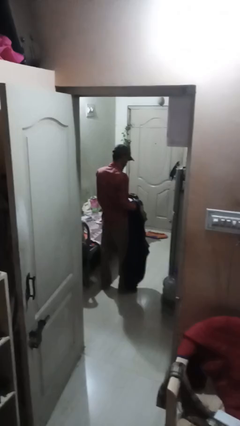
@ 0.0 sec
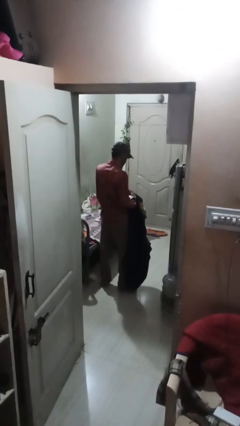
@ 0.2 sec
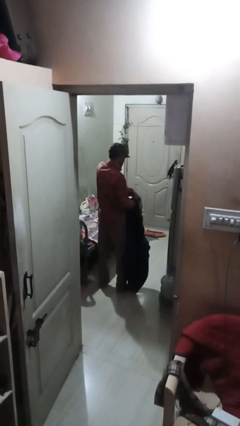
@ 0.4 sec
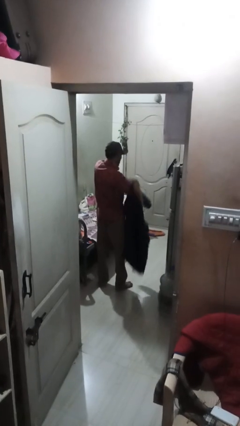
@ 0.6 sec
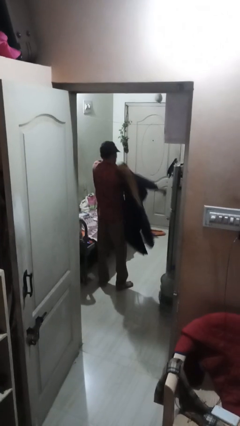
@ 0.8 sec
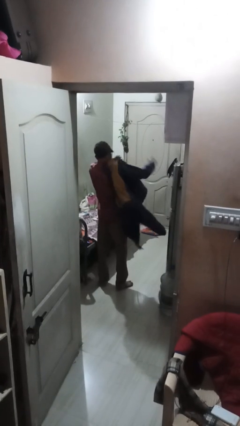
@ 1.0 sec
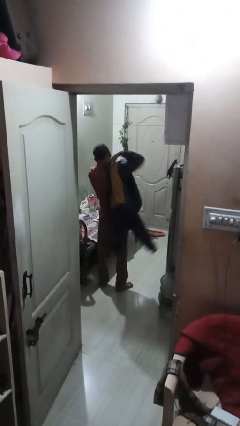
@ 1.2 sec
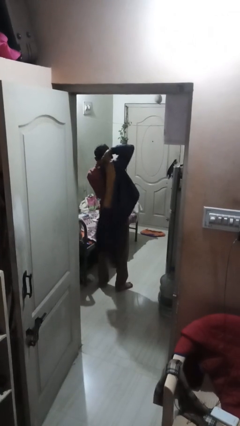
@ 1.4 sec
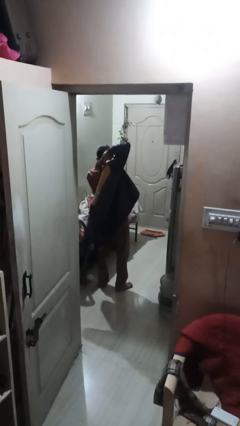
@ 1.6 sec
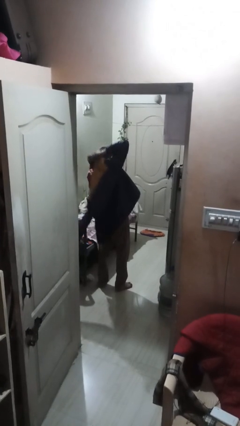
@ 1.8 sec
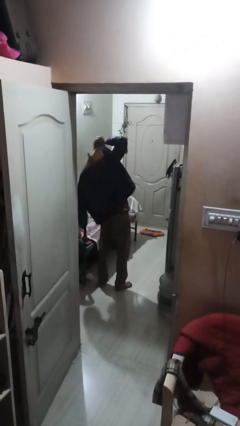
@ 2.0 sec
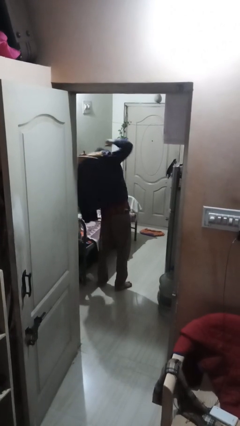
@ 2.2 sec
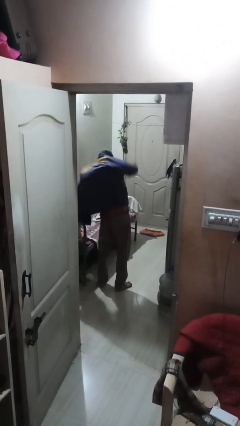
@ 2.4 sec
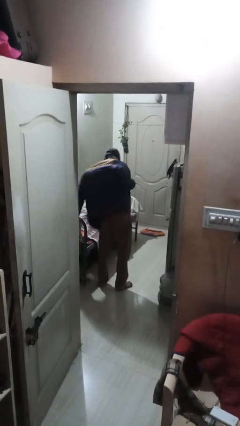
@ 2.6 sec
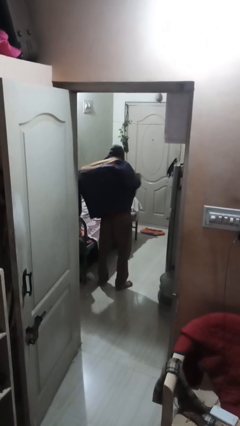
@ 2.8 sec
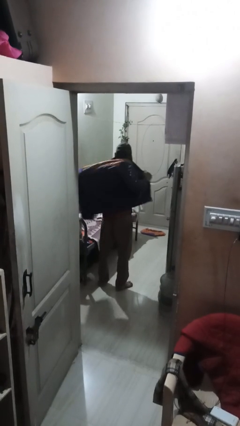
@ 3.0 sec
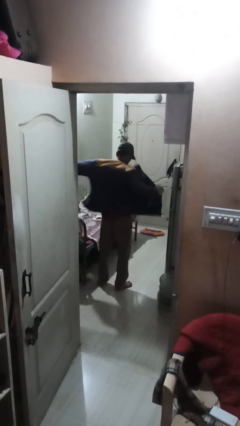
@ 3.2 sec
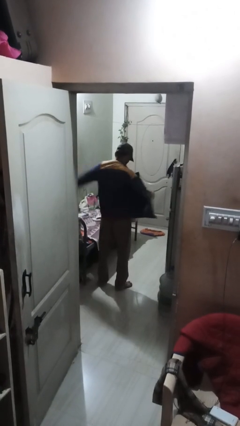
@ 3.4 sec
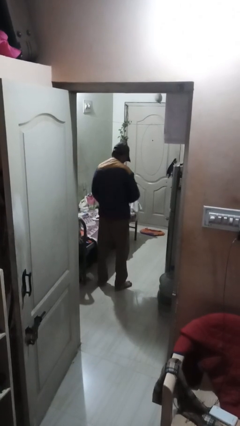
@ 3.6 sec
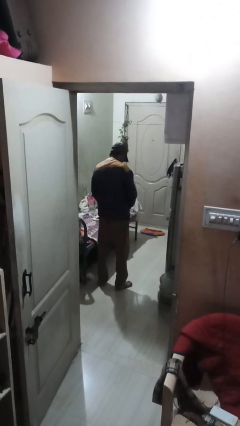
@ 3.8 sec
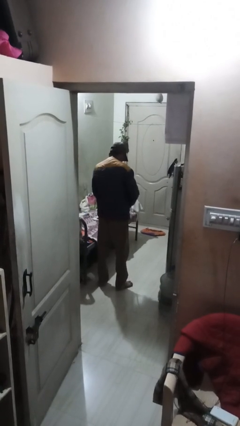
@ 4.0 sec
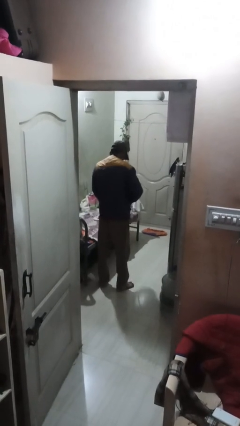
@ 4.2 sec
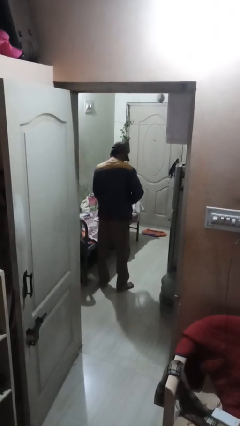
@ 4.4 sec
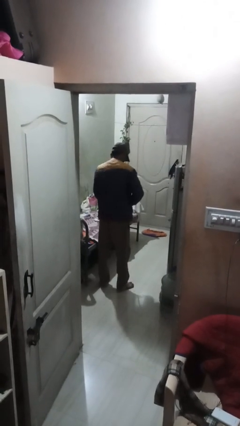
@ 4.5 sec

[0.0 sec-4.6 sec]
person puts on jacket

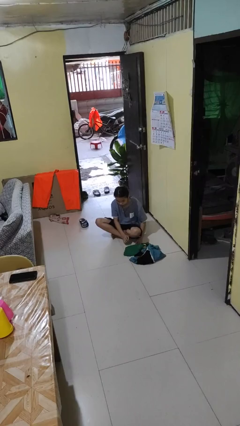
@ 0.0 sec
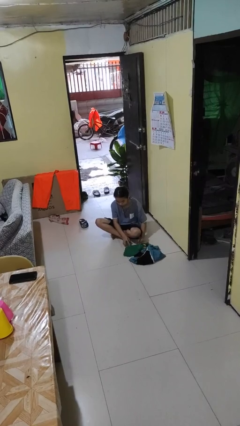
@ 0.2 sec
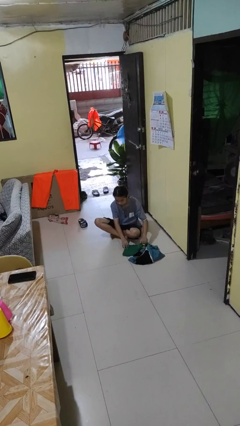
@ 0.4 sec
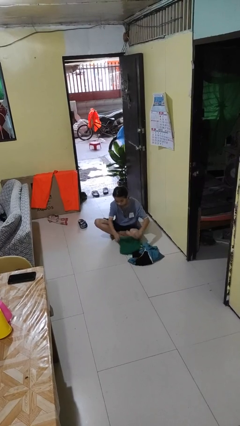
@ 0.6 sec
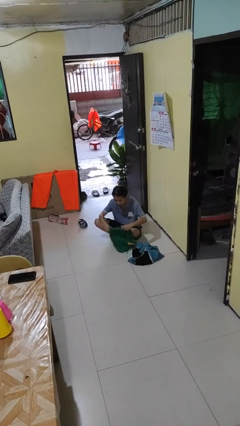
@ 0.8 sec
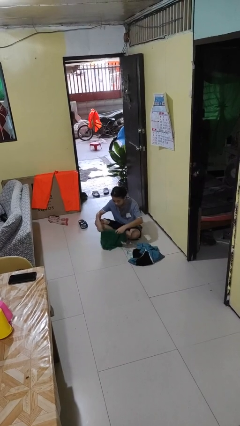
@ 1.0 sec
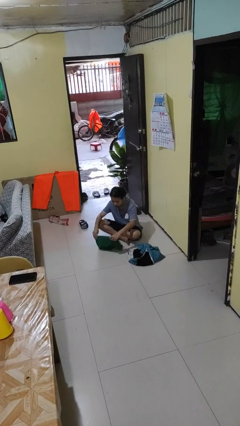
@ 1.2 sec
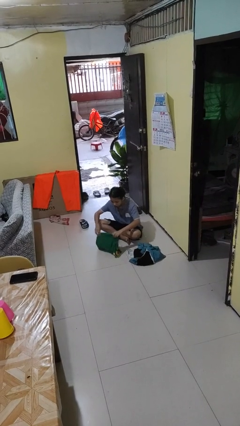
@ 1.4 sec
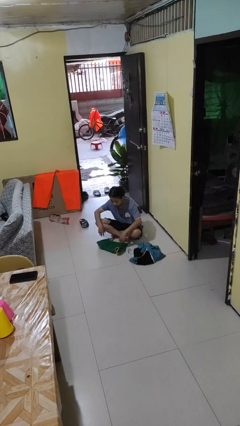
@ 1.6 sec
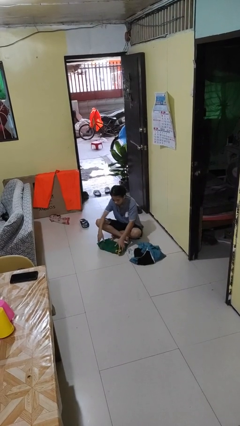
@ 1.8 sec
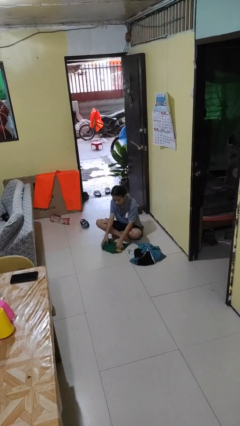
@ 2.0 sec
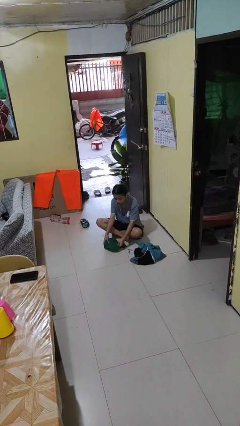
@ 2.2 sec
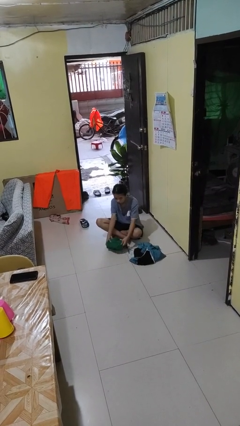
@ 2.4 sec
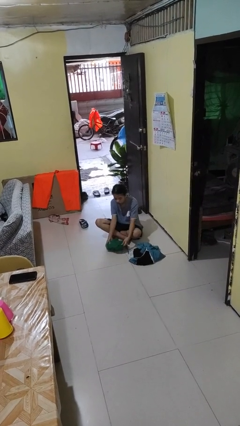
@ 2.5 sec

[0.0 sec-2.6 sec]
person folds shirt

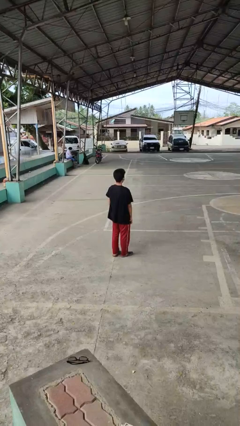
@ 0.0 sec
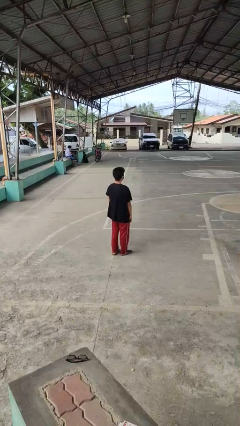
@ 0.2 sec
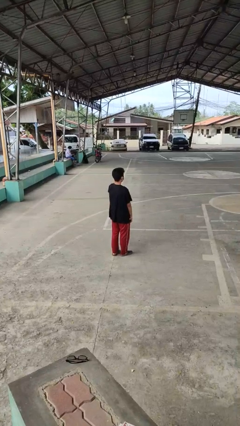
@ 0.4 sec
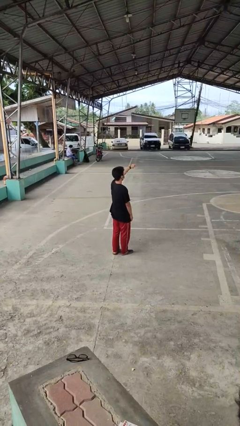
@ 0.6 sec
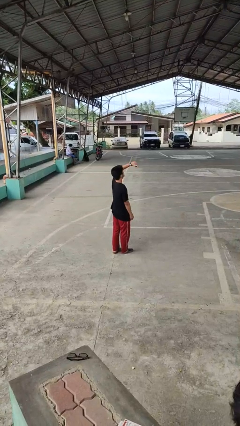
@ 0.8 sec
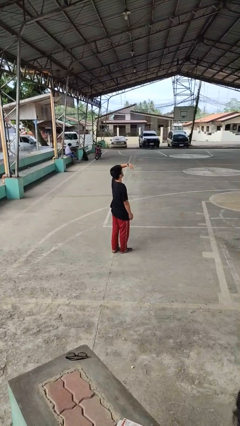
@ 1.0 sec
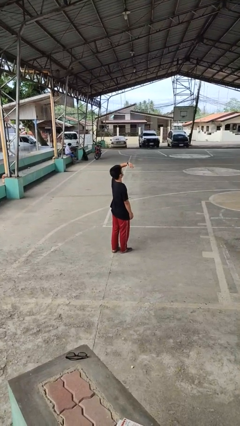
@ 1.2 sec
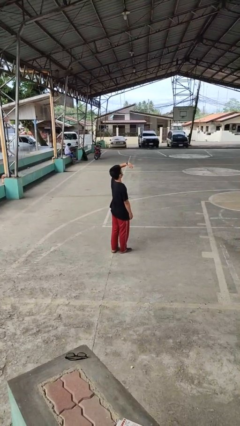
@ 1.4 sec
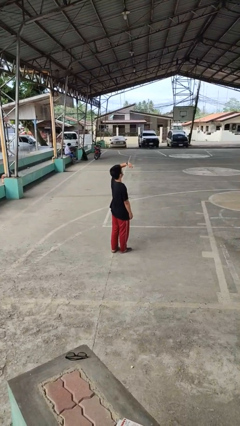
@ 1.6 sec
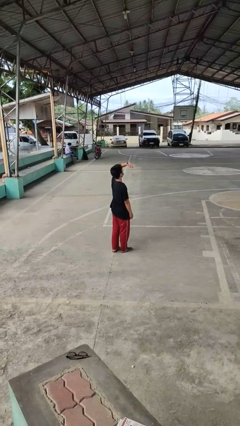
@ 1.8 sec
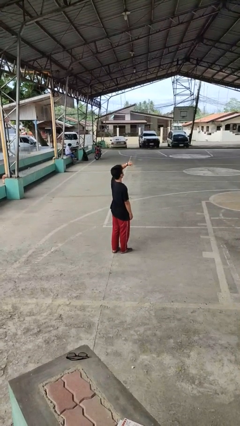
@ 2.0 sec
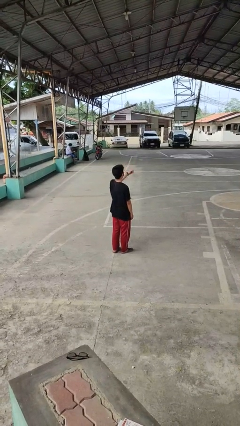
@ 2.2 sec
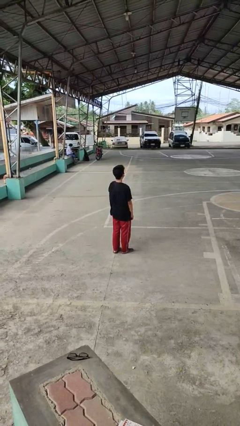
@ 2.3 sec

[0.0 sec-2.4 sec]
person looks at wristwatch

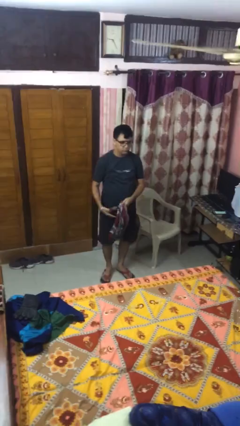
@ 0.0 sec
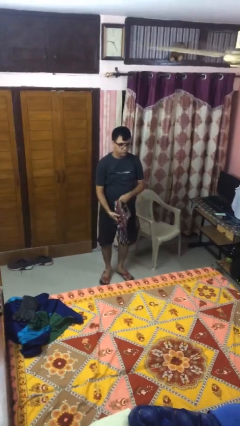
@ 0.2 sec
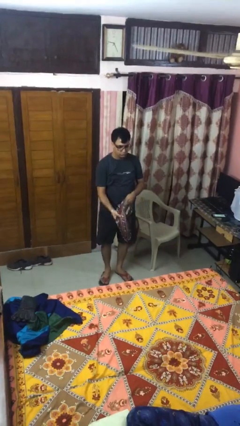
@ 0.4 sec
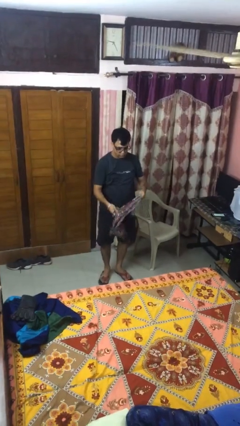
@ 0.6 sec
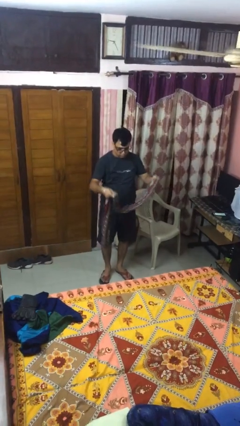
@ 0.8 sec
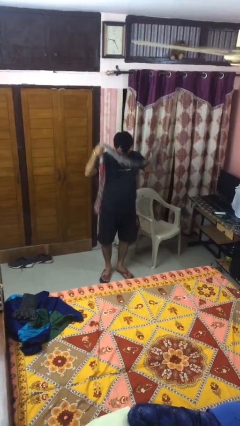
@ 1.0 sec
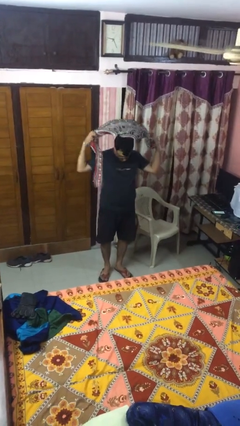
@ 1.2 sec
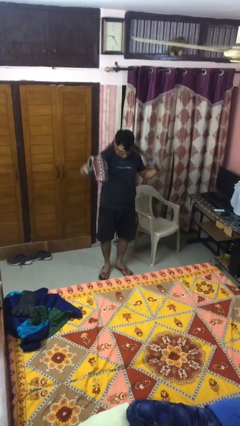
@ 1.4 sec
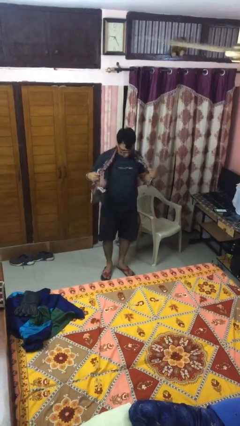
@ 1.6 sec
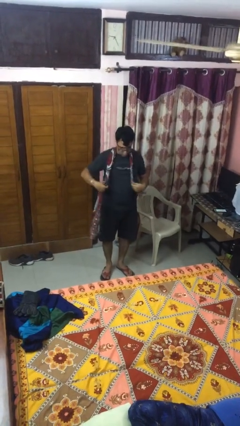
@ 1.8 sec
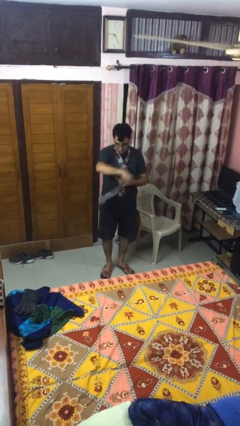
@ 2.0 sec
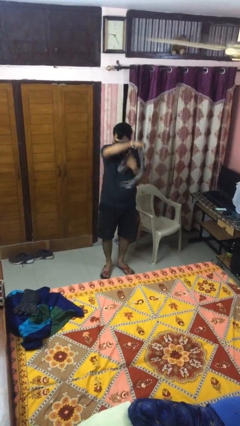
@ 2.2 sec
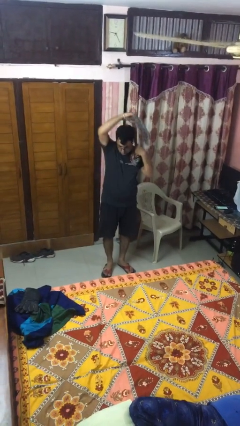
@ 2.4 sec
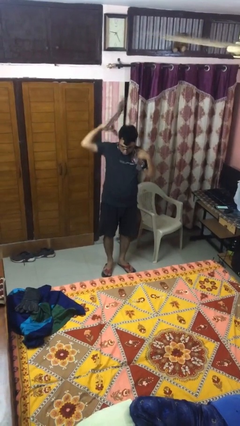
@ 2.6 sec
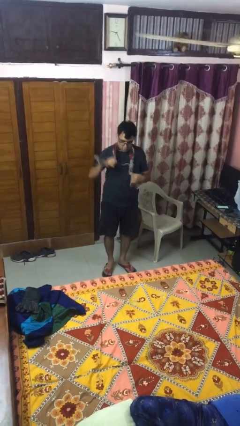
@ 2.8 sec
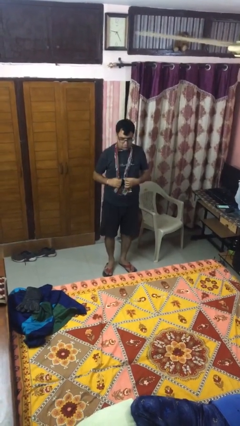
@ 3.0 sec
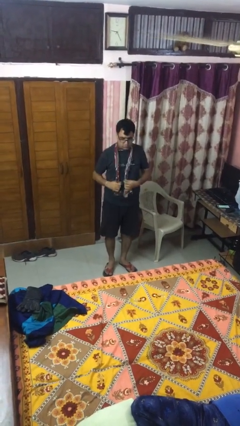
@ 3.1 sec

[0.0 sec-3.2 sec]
person puts on scarf

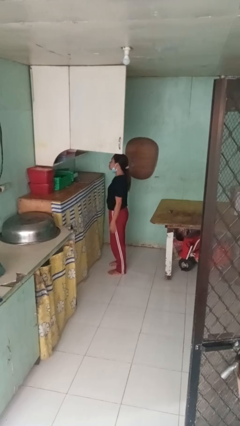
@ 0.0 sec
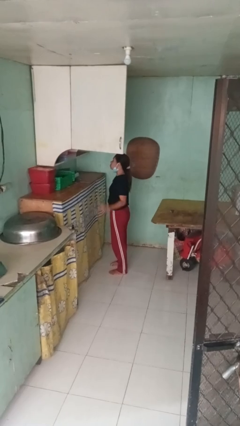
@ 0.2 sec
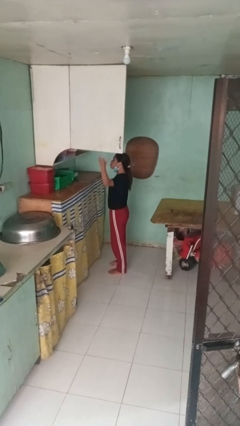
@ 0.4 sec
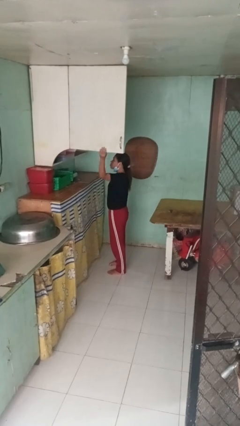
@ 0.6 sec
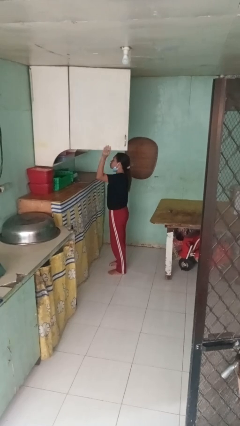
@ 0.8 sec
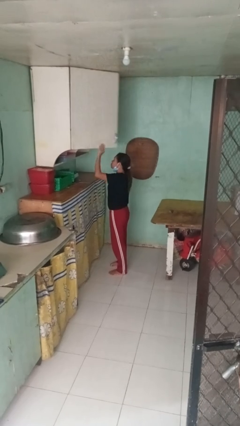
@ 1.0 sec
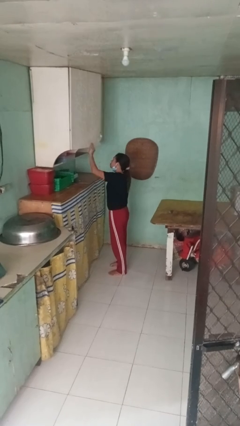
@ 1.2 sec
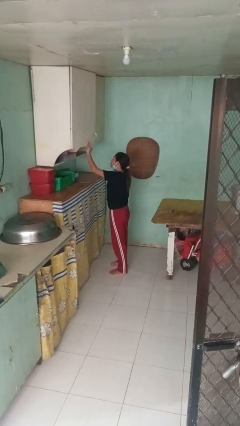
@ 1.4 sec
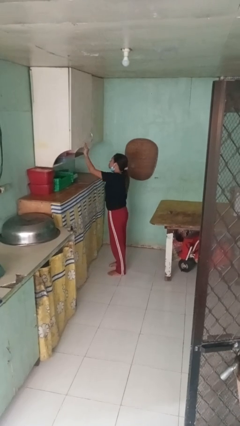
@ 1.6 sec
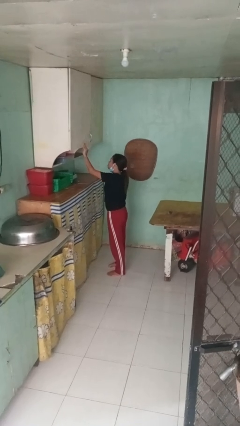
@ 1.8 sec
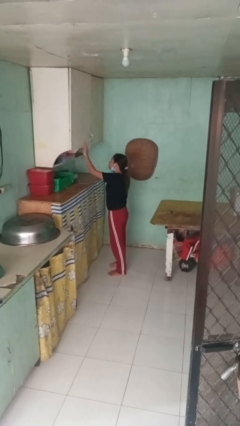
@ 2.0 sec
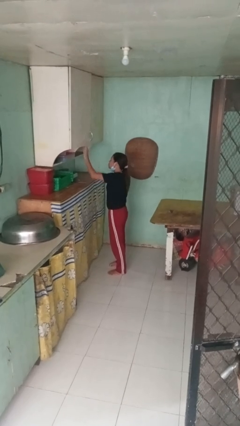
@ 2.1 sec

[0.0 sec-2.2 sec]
person closes cabinet

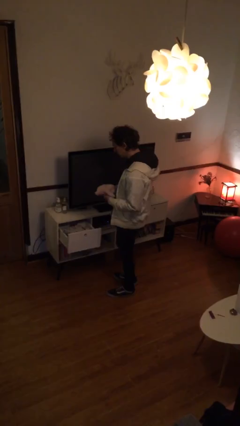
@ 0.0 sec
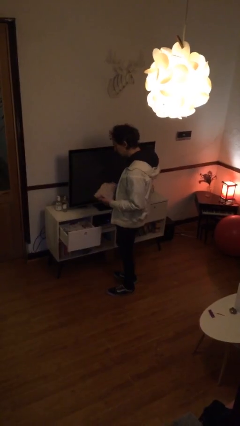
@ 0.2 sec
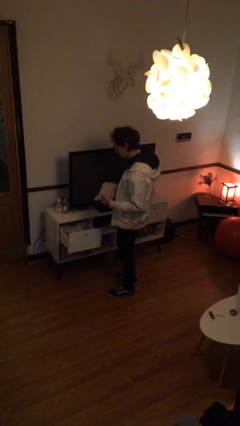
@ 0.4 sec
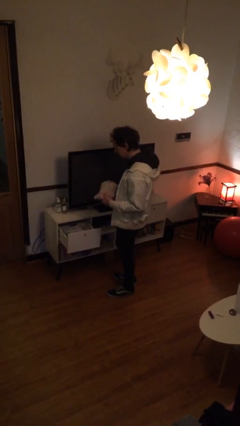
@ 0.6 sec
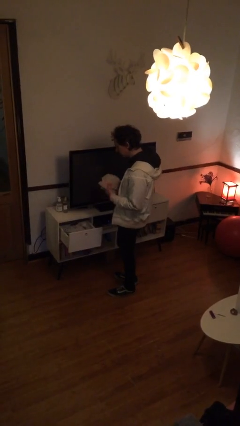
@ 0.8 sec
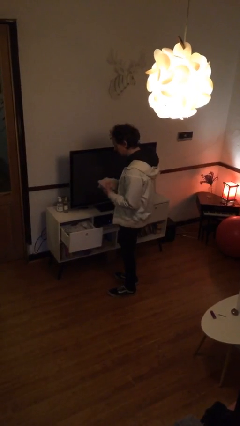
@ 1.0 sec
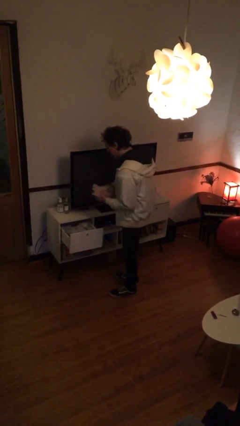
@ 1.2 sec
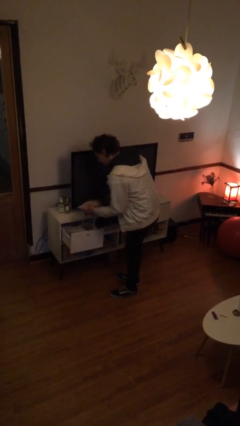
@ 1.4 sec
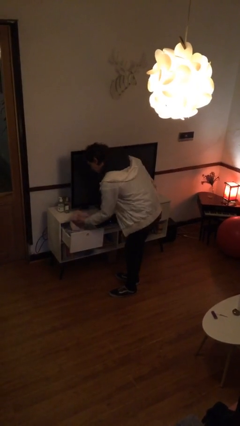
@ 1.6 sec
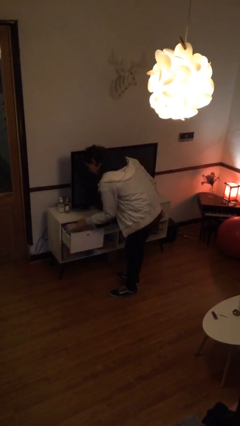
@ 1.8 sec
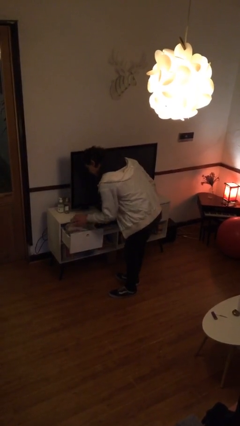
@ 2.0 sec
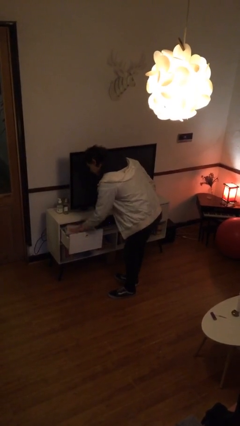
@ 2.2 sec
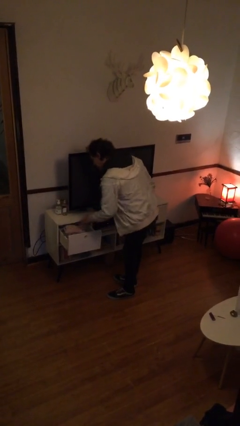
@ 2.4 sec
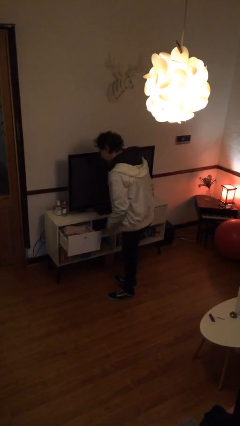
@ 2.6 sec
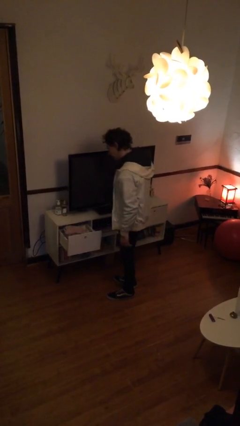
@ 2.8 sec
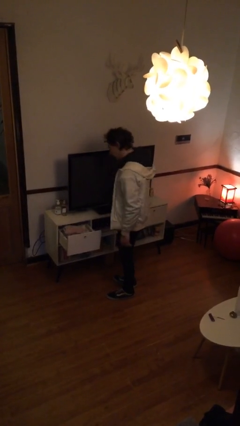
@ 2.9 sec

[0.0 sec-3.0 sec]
person puts clothes into dresser
